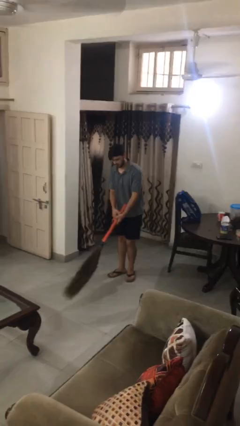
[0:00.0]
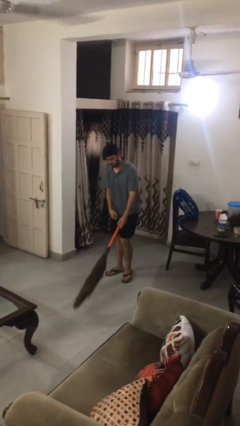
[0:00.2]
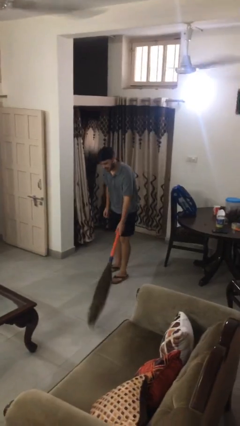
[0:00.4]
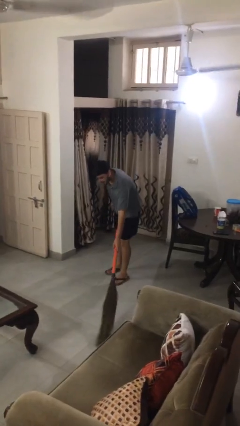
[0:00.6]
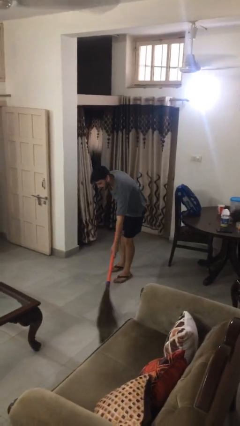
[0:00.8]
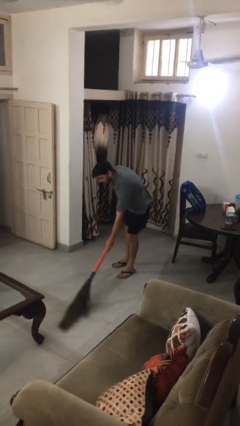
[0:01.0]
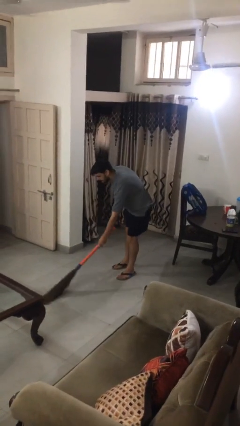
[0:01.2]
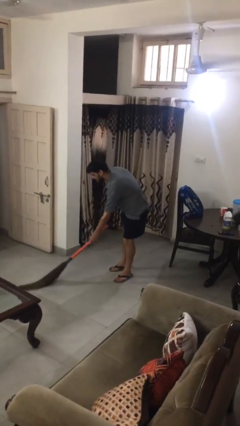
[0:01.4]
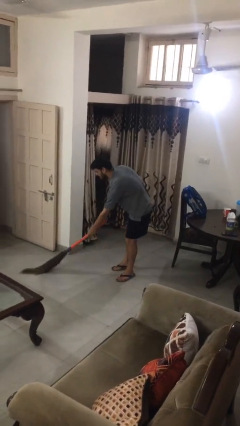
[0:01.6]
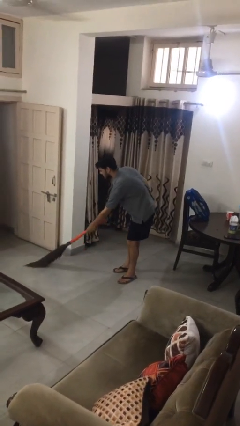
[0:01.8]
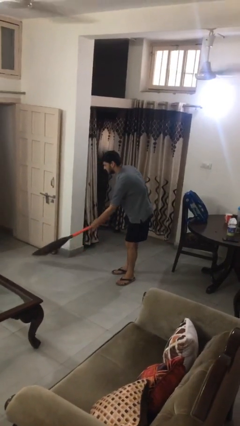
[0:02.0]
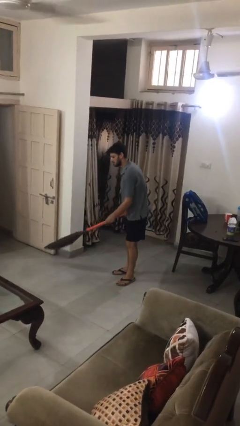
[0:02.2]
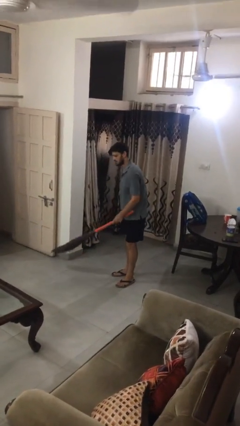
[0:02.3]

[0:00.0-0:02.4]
person sweeps floor

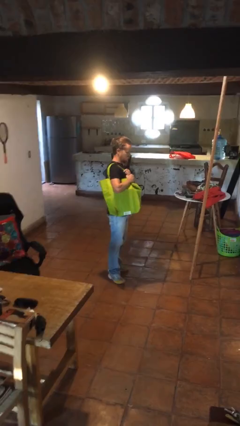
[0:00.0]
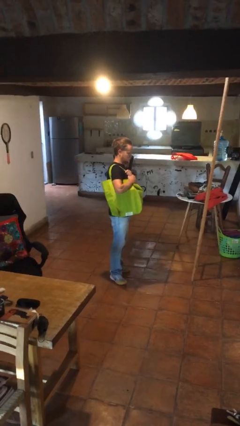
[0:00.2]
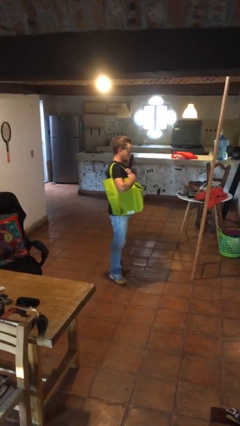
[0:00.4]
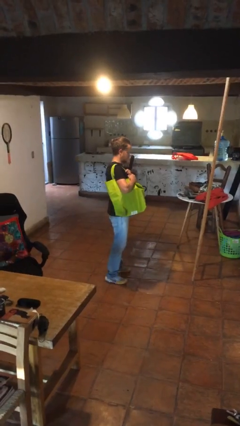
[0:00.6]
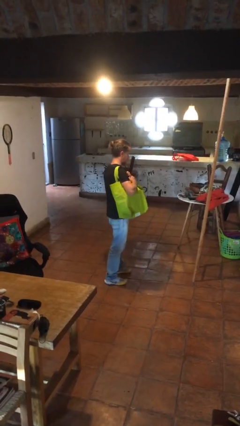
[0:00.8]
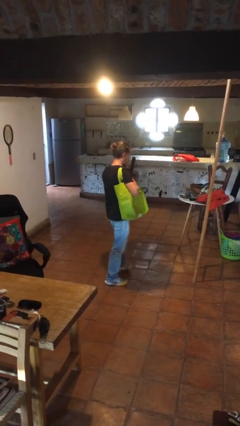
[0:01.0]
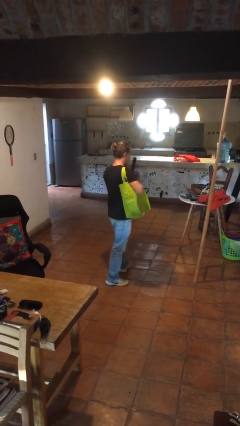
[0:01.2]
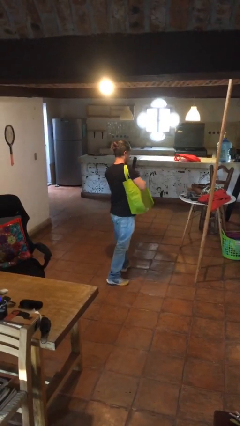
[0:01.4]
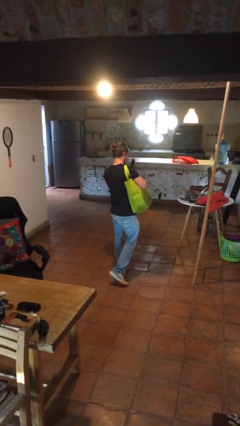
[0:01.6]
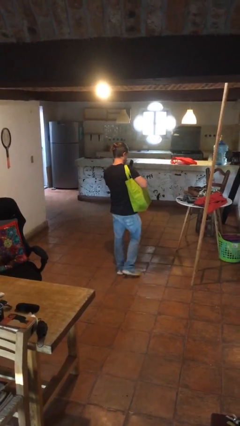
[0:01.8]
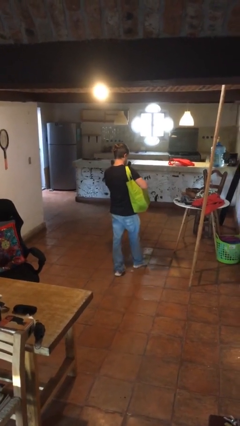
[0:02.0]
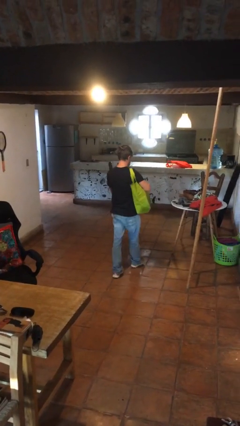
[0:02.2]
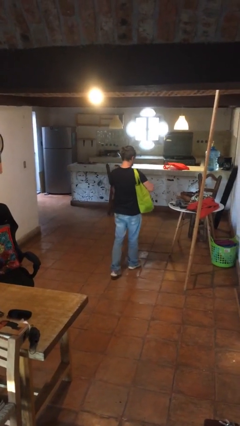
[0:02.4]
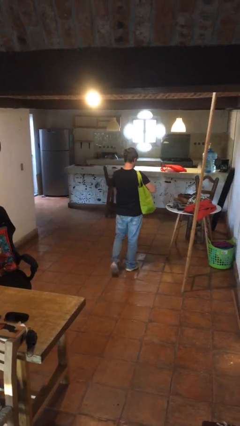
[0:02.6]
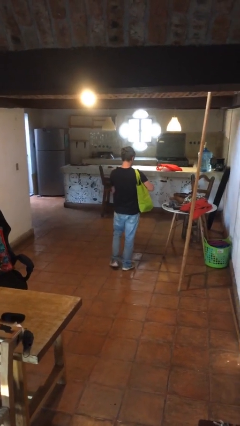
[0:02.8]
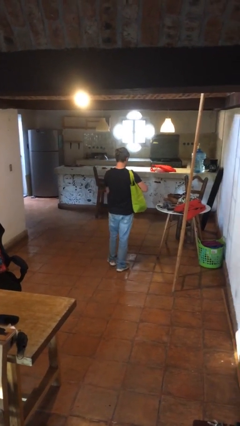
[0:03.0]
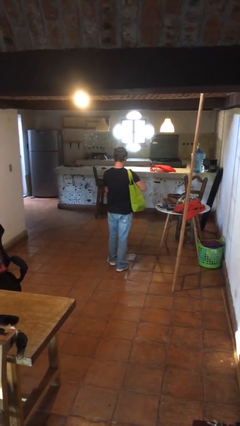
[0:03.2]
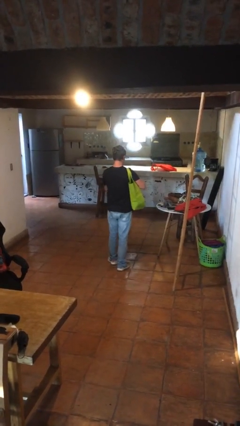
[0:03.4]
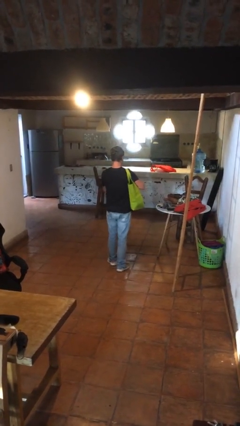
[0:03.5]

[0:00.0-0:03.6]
person carries groceries

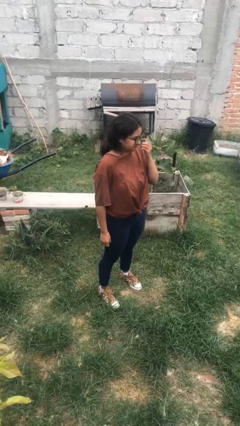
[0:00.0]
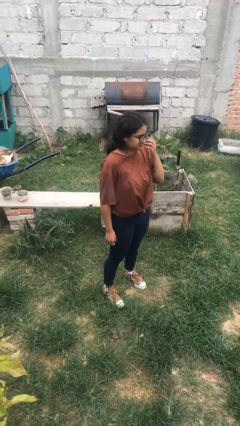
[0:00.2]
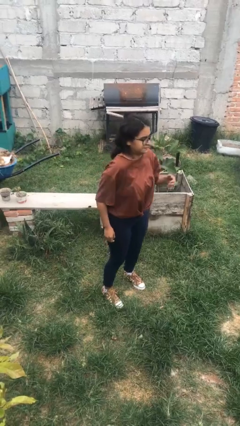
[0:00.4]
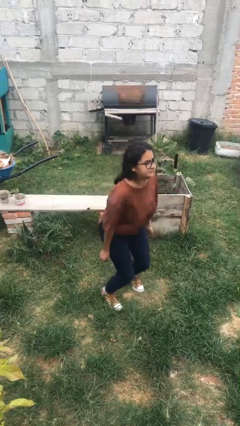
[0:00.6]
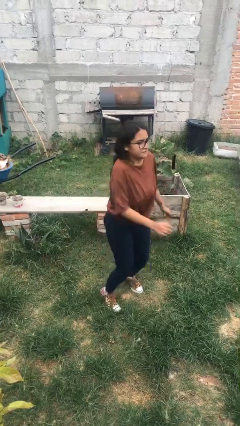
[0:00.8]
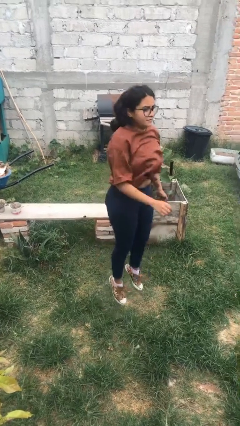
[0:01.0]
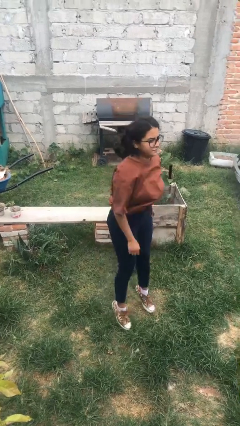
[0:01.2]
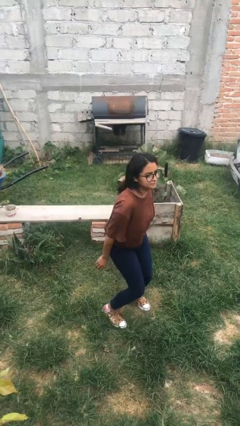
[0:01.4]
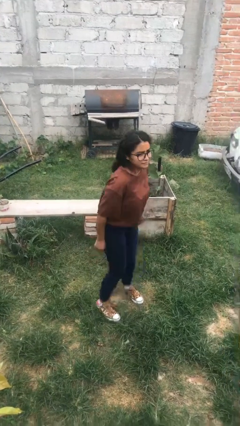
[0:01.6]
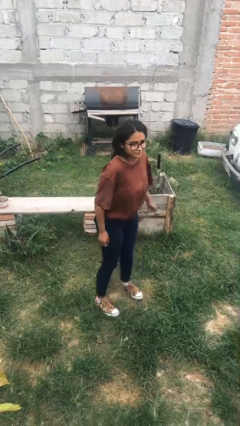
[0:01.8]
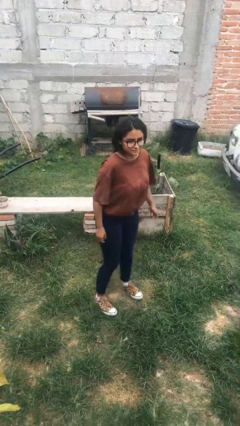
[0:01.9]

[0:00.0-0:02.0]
person jumps

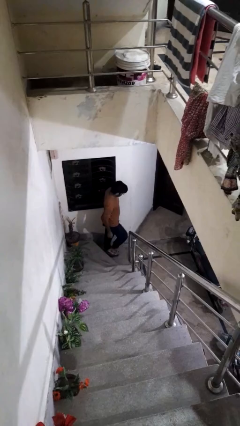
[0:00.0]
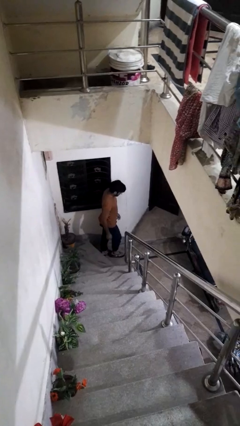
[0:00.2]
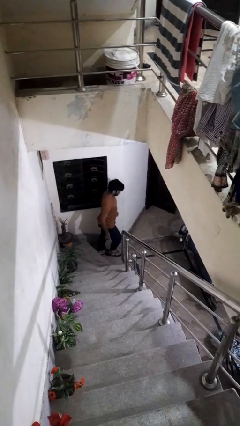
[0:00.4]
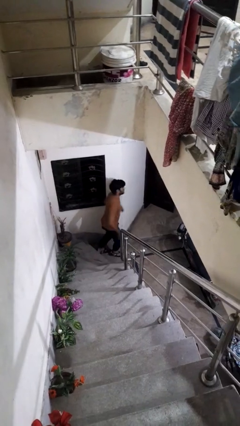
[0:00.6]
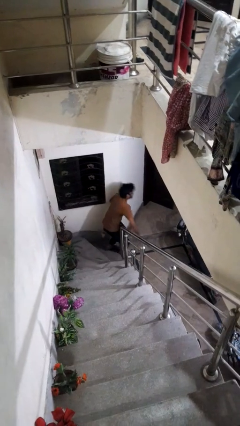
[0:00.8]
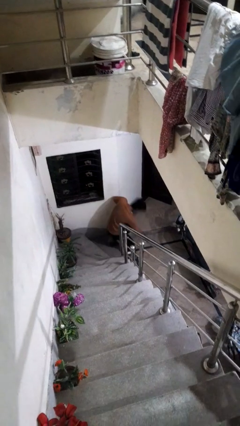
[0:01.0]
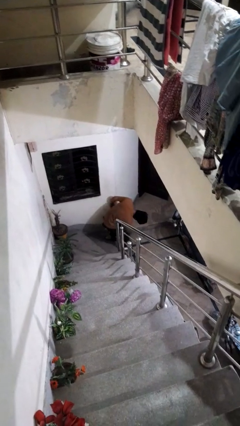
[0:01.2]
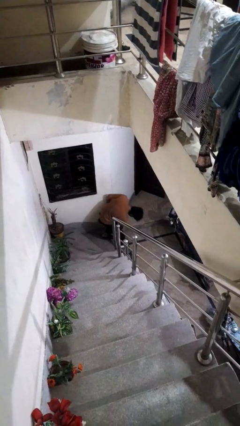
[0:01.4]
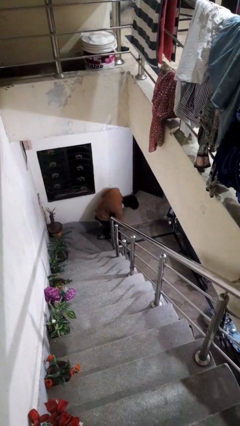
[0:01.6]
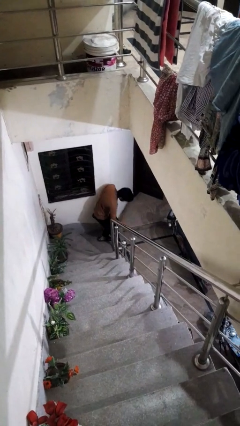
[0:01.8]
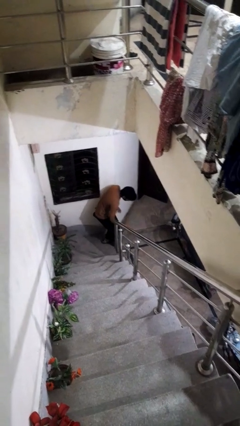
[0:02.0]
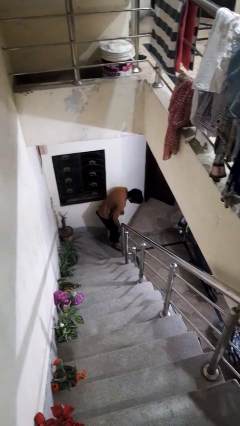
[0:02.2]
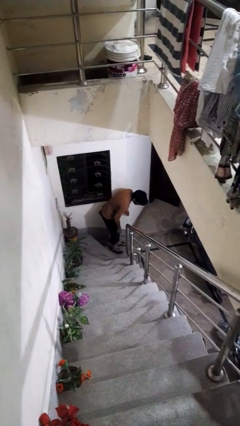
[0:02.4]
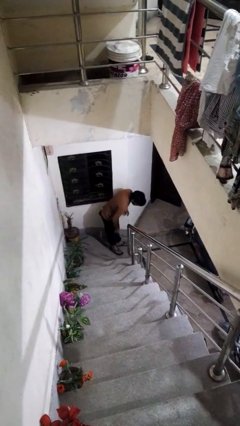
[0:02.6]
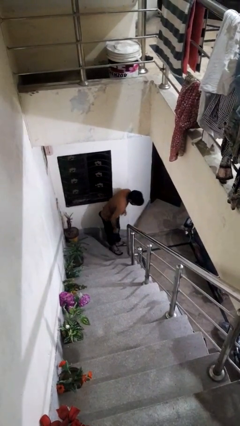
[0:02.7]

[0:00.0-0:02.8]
person trips on stair

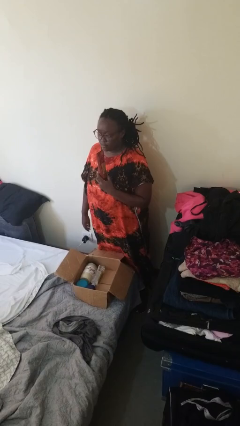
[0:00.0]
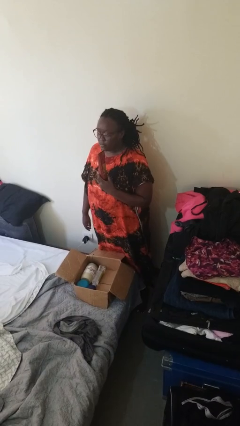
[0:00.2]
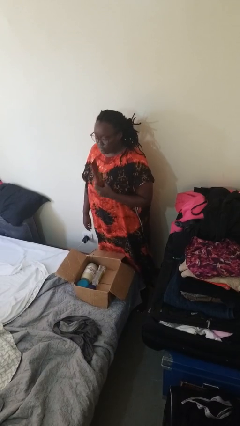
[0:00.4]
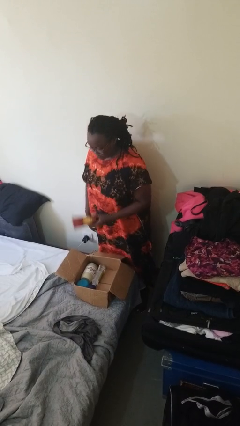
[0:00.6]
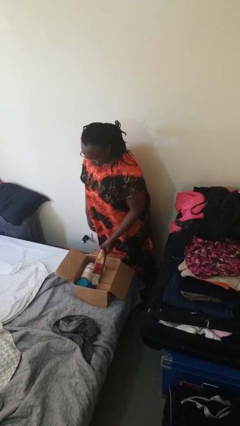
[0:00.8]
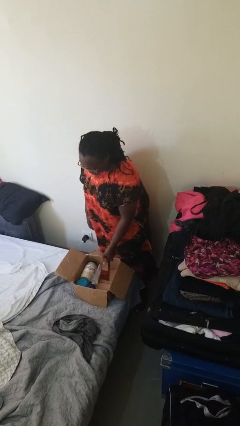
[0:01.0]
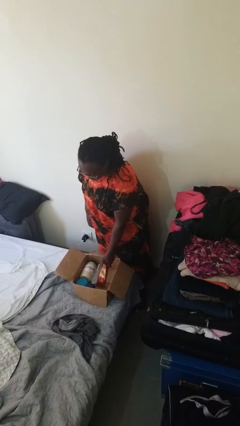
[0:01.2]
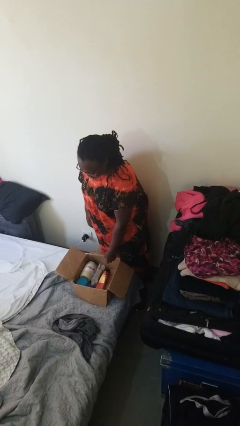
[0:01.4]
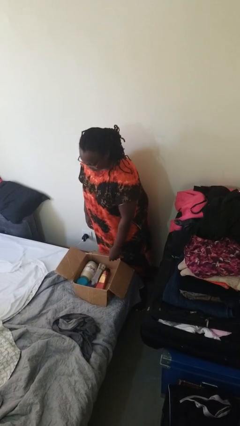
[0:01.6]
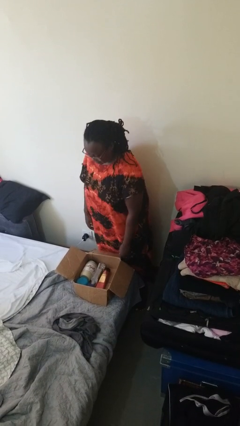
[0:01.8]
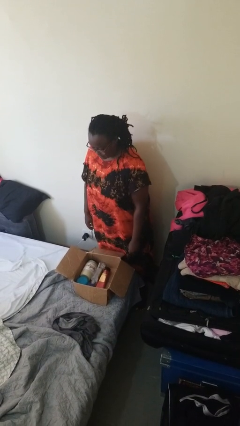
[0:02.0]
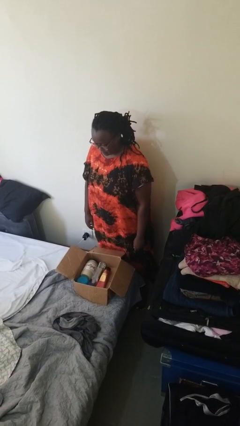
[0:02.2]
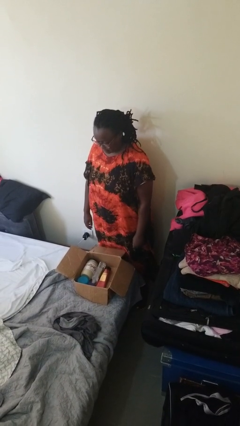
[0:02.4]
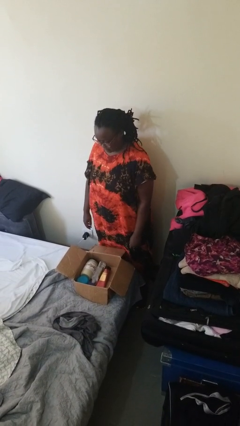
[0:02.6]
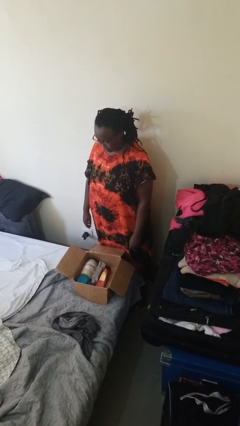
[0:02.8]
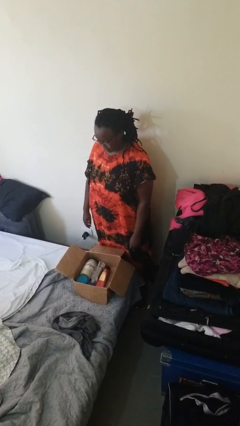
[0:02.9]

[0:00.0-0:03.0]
person puts object into box

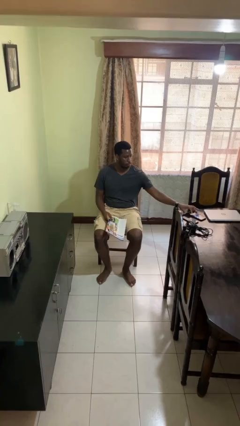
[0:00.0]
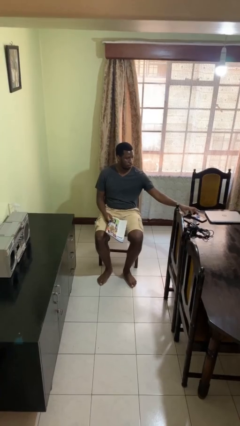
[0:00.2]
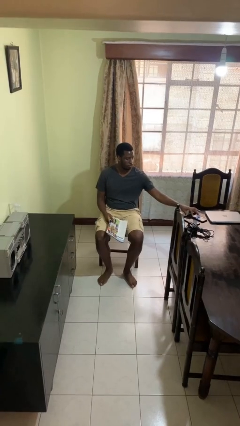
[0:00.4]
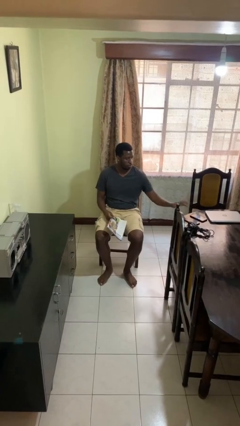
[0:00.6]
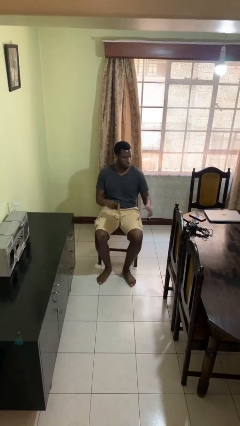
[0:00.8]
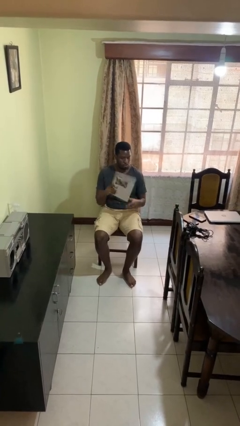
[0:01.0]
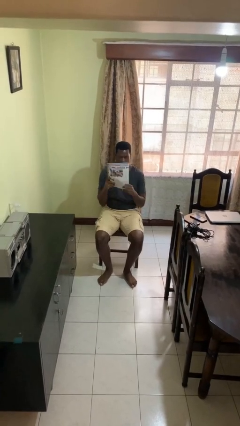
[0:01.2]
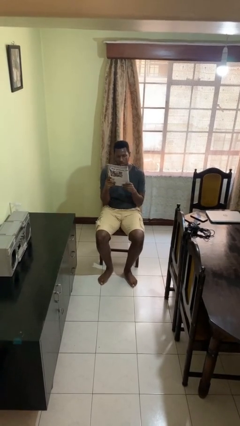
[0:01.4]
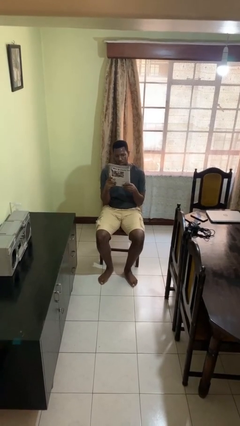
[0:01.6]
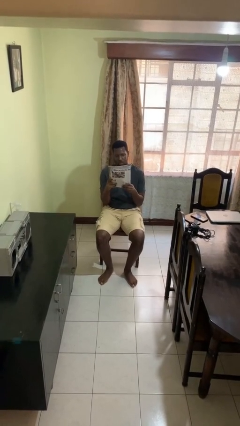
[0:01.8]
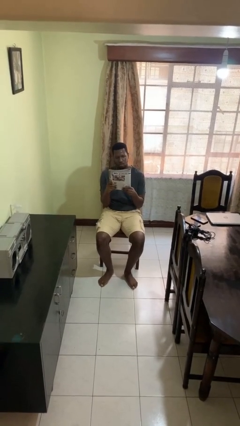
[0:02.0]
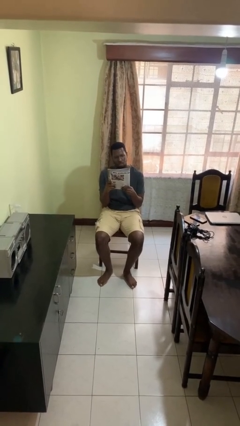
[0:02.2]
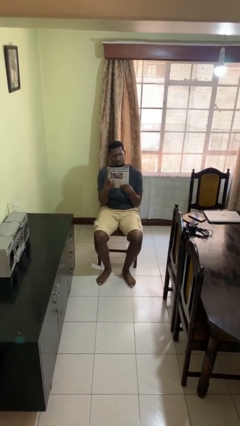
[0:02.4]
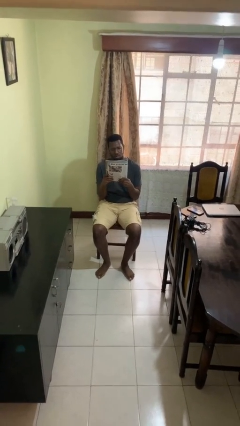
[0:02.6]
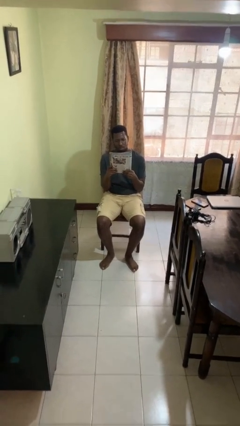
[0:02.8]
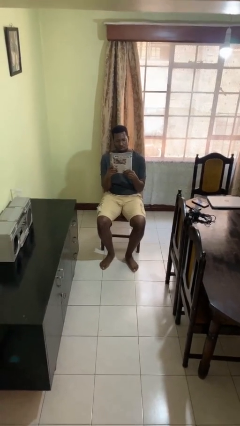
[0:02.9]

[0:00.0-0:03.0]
person reads document

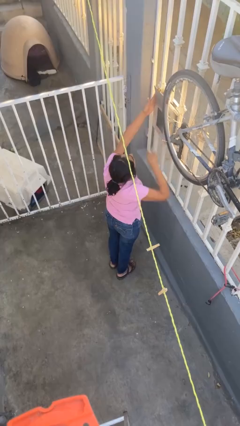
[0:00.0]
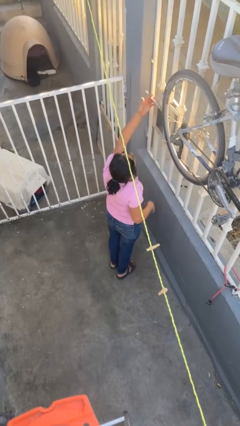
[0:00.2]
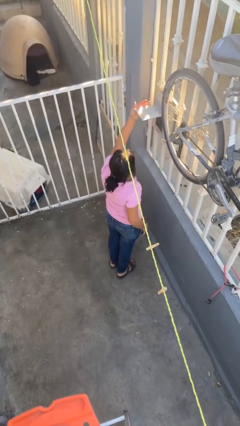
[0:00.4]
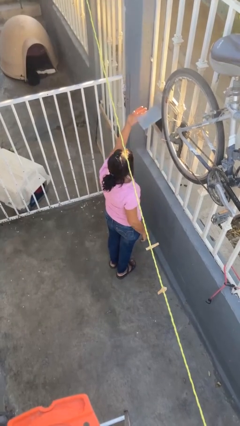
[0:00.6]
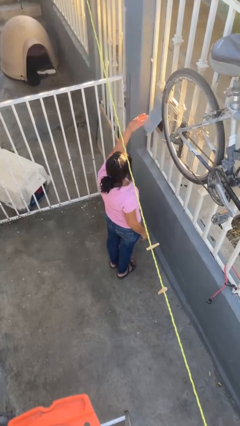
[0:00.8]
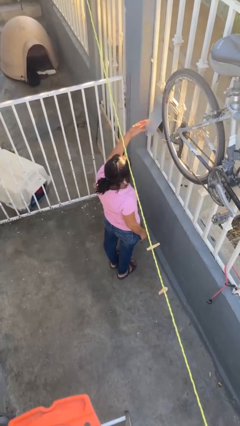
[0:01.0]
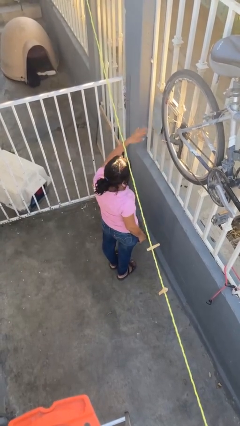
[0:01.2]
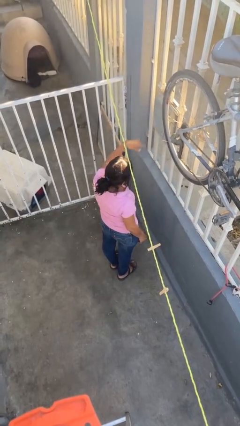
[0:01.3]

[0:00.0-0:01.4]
person closes mailbox
